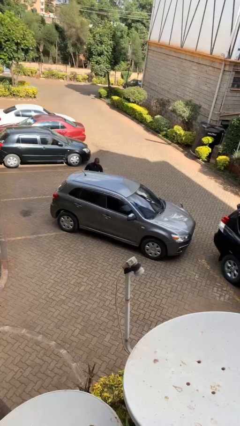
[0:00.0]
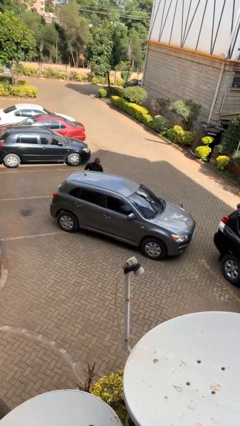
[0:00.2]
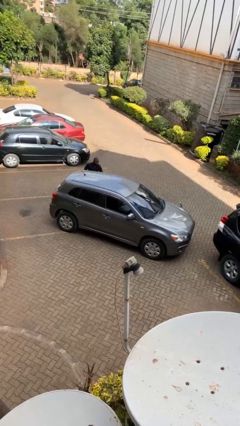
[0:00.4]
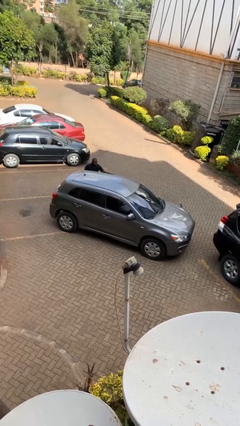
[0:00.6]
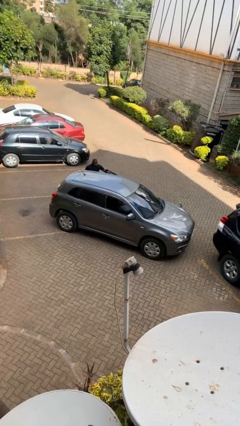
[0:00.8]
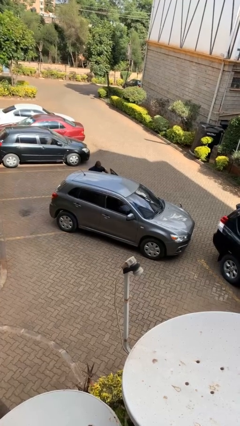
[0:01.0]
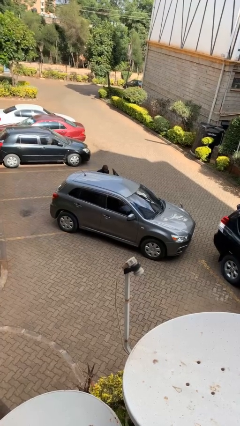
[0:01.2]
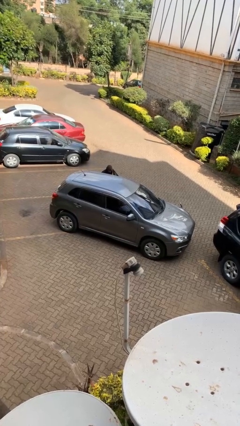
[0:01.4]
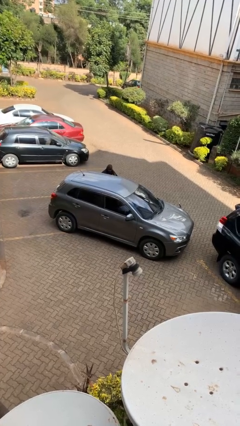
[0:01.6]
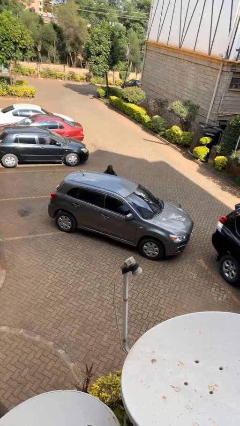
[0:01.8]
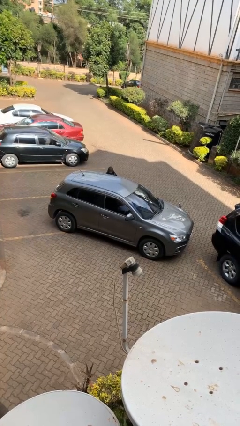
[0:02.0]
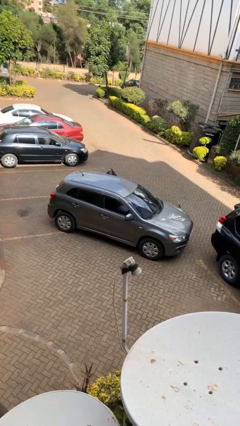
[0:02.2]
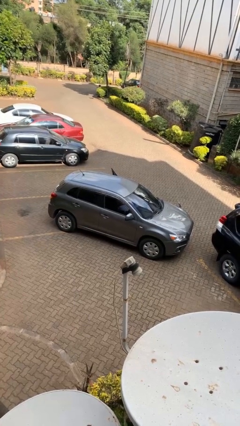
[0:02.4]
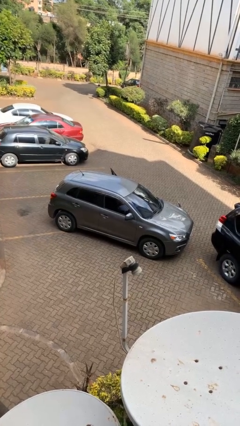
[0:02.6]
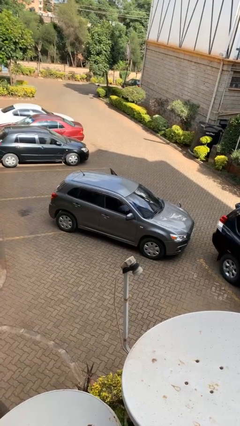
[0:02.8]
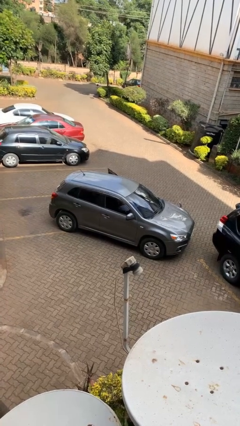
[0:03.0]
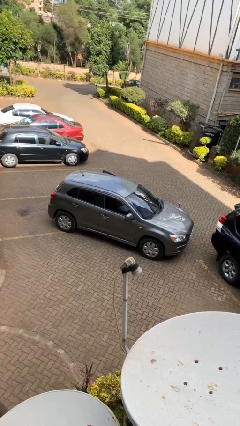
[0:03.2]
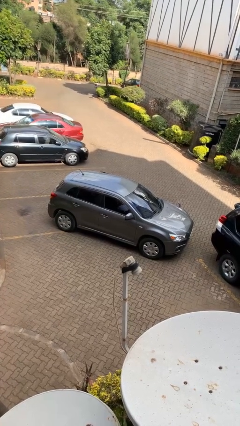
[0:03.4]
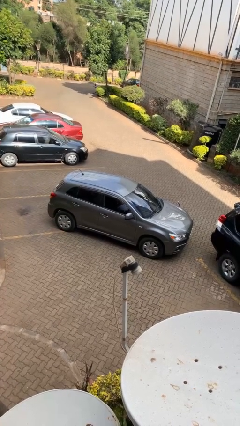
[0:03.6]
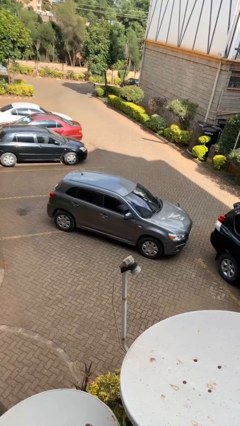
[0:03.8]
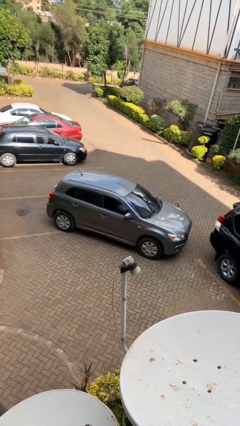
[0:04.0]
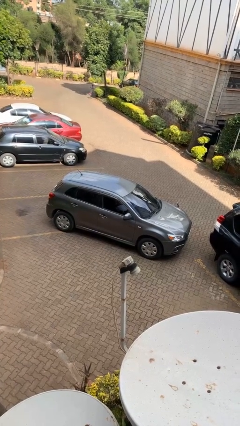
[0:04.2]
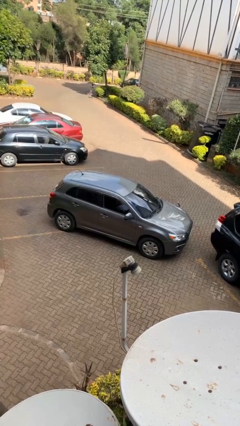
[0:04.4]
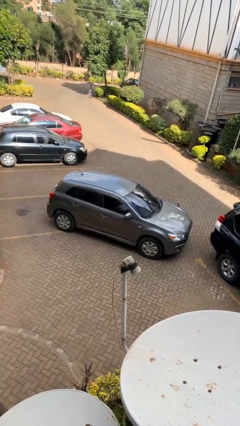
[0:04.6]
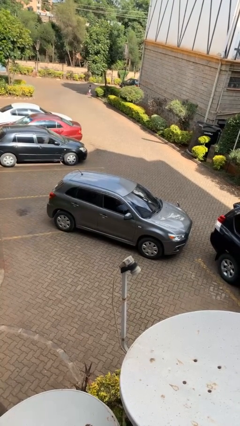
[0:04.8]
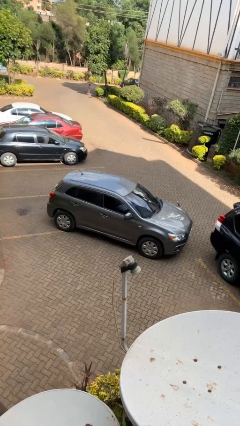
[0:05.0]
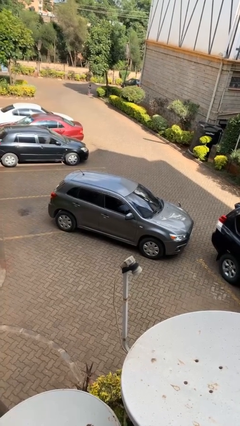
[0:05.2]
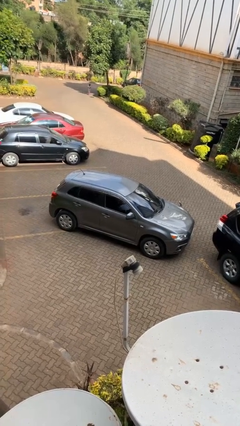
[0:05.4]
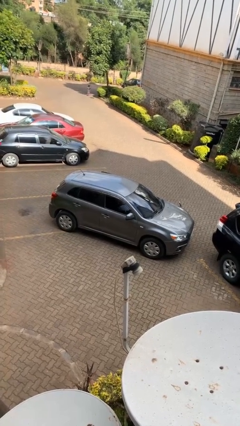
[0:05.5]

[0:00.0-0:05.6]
car picks up person

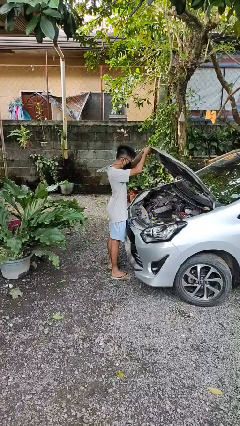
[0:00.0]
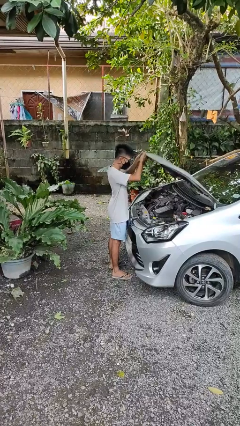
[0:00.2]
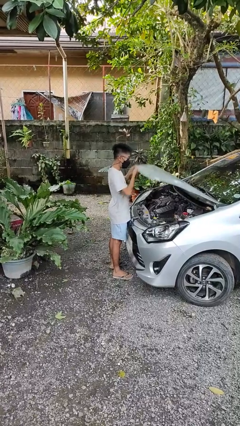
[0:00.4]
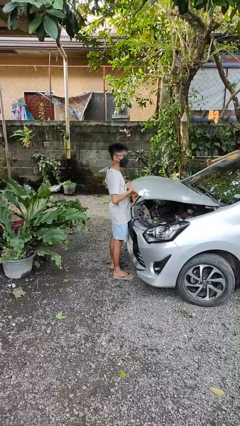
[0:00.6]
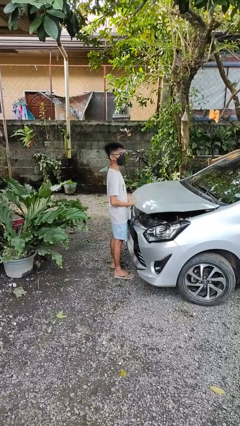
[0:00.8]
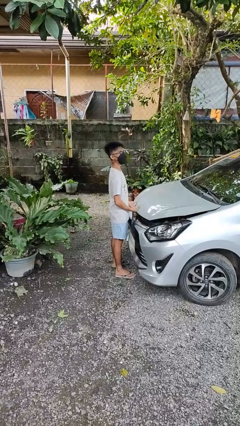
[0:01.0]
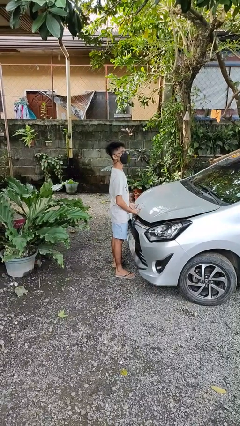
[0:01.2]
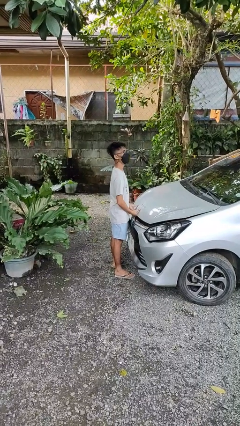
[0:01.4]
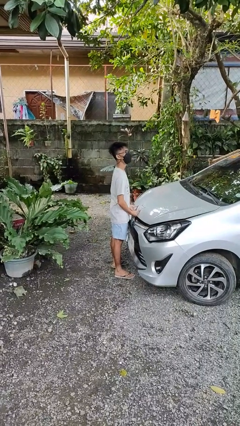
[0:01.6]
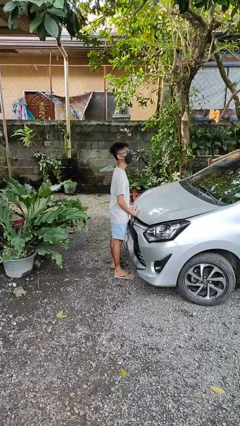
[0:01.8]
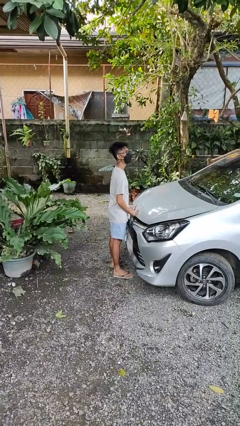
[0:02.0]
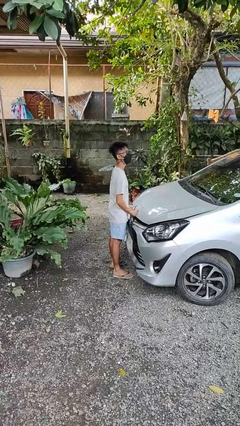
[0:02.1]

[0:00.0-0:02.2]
person closes car hood

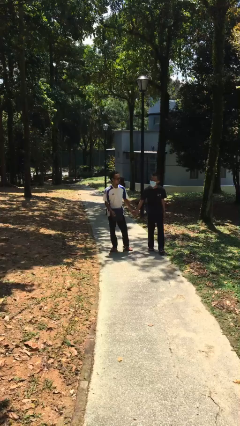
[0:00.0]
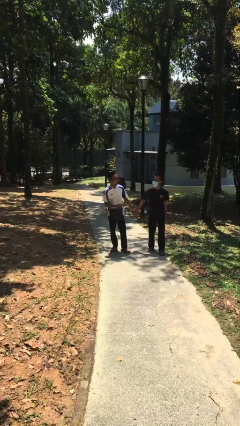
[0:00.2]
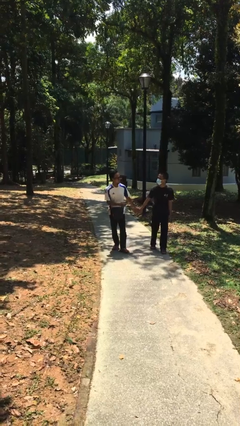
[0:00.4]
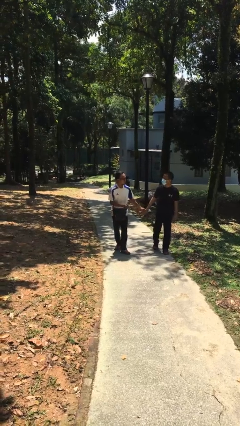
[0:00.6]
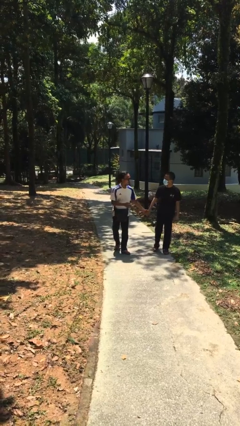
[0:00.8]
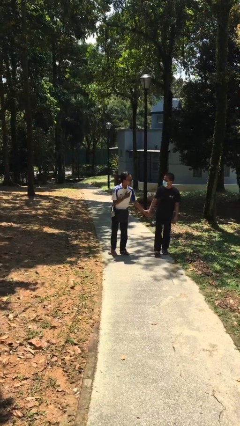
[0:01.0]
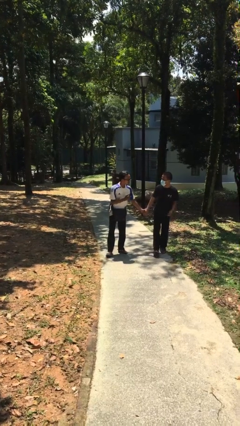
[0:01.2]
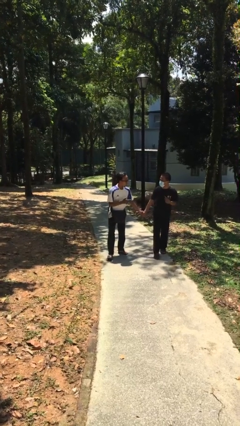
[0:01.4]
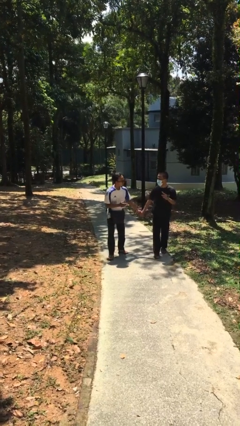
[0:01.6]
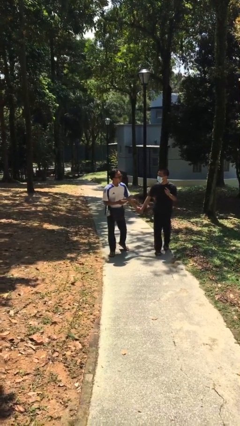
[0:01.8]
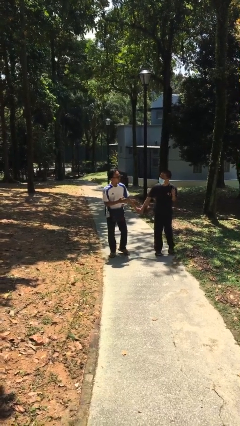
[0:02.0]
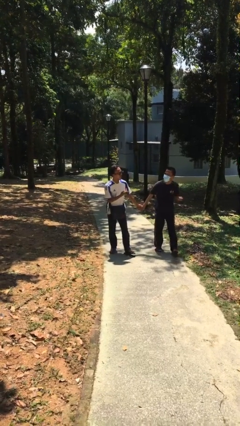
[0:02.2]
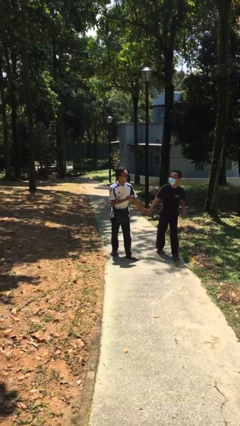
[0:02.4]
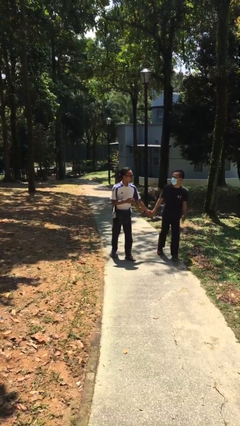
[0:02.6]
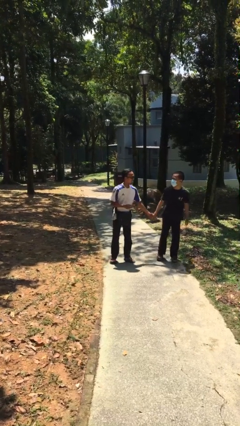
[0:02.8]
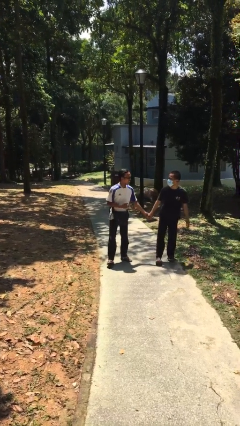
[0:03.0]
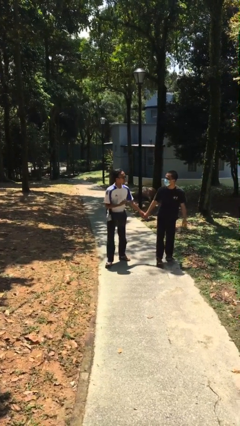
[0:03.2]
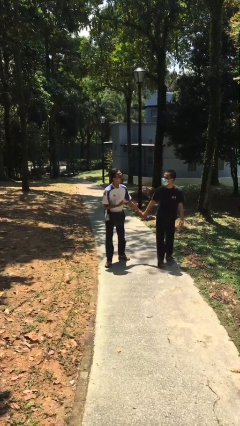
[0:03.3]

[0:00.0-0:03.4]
person holds hand

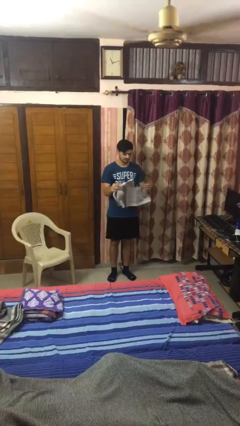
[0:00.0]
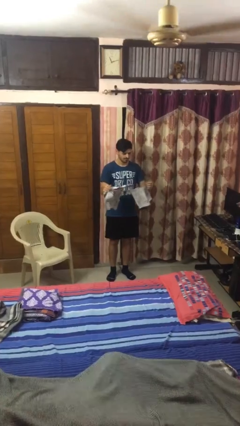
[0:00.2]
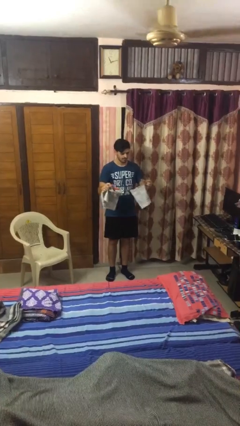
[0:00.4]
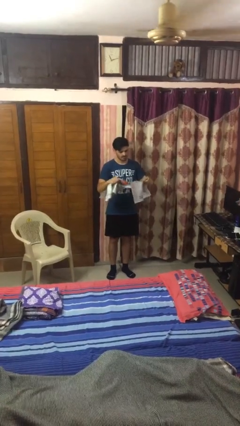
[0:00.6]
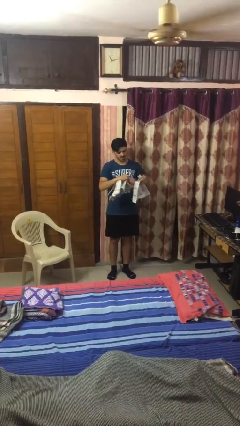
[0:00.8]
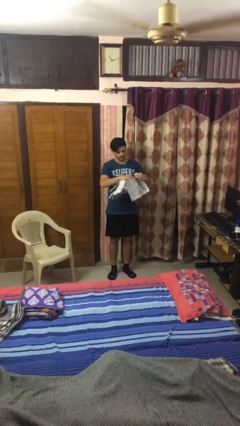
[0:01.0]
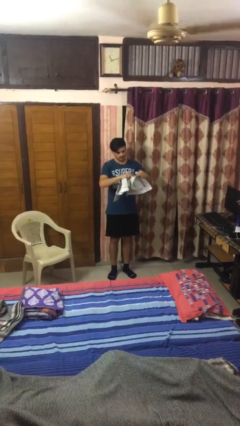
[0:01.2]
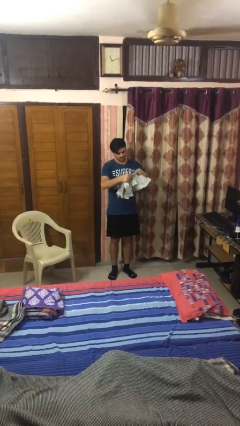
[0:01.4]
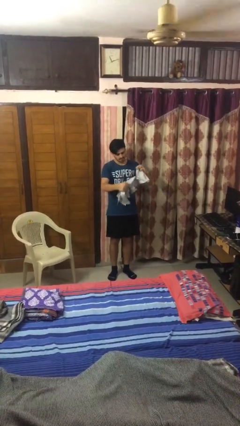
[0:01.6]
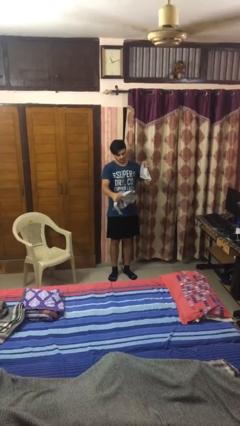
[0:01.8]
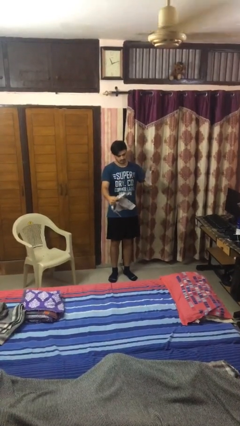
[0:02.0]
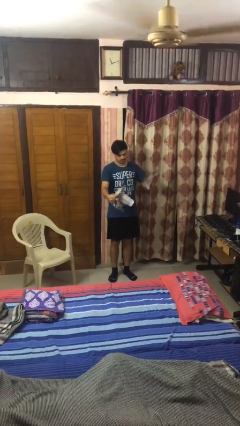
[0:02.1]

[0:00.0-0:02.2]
person tears paper

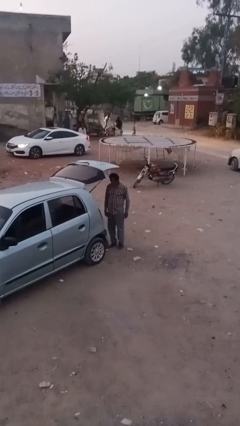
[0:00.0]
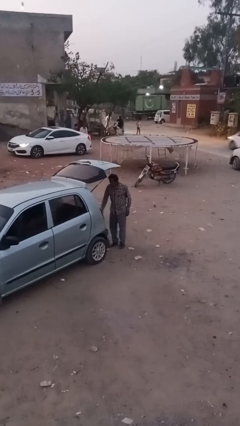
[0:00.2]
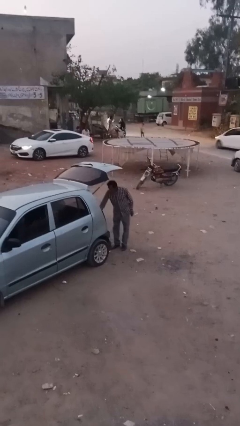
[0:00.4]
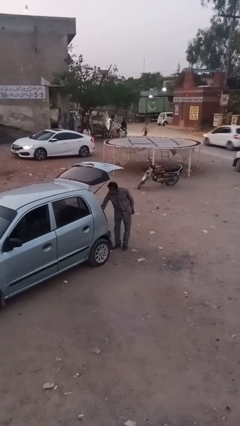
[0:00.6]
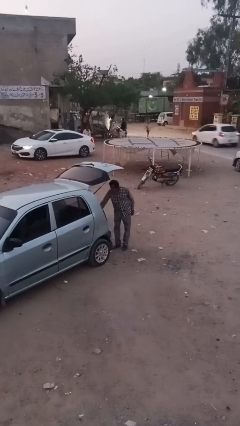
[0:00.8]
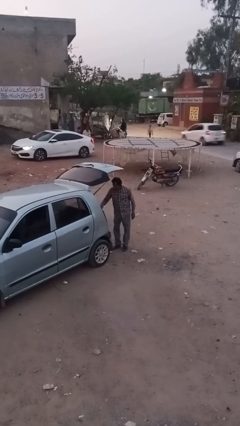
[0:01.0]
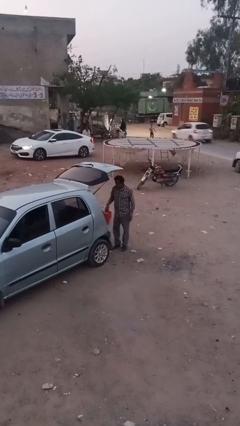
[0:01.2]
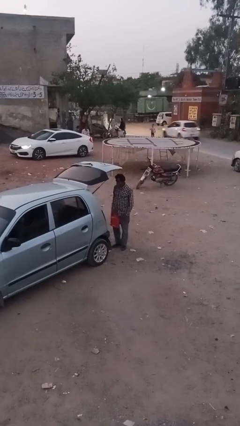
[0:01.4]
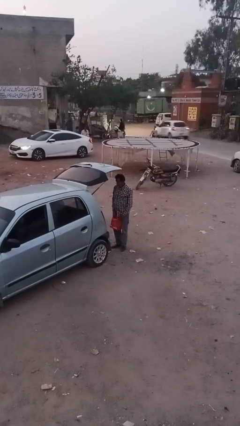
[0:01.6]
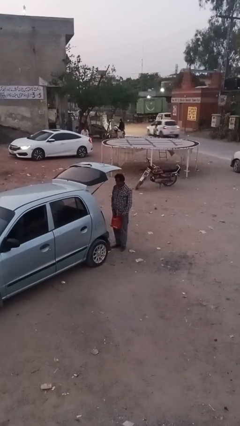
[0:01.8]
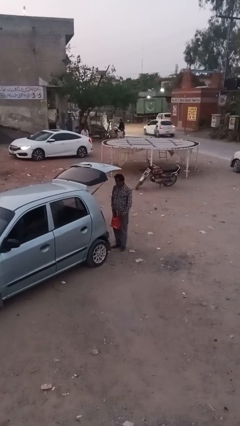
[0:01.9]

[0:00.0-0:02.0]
person unloads car

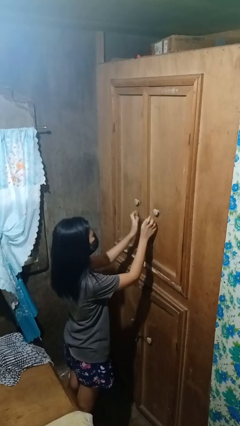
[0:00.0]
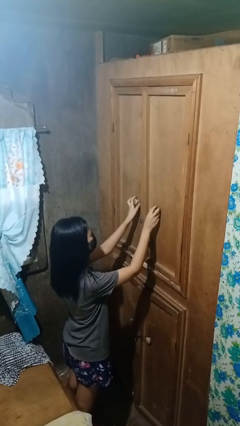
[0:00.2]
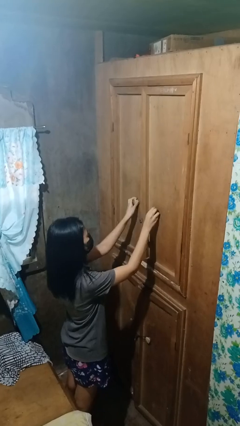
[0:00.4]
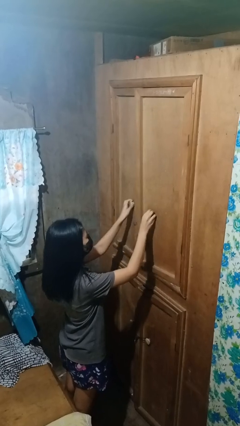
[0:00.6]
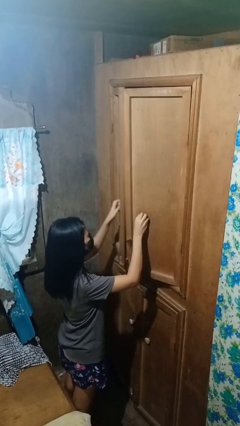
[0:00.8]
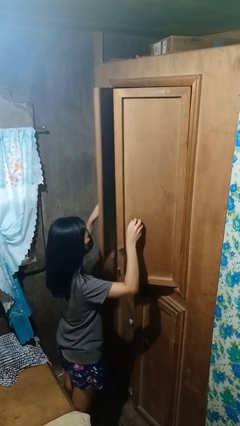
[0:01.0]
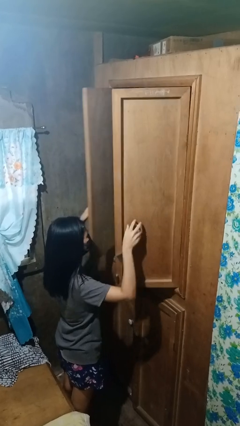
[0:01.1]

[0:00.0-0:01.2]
person opens closet door

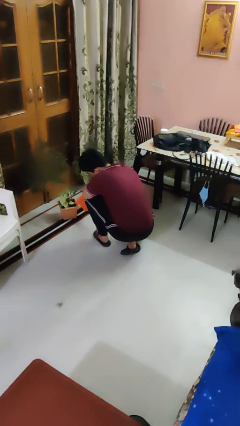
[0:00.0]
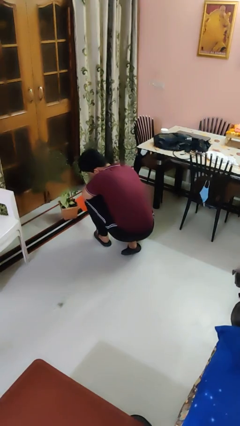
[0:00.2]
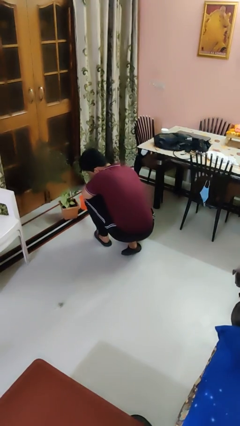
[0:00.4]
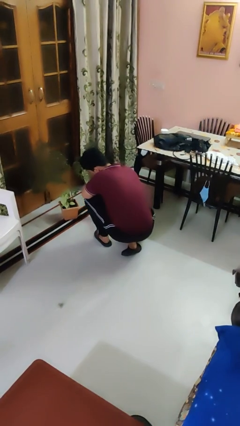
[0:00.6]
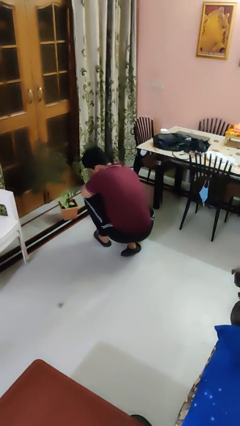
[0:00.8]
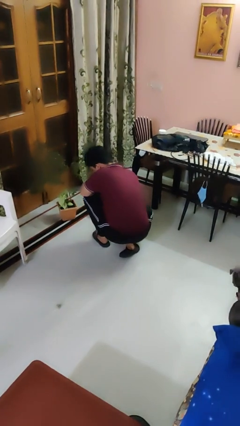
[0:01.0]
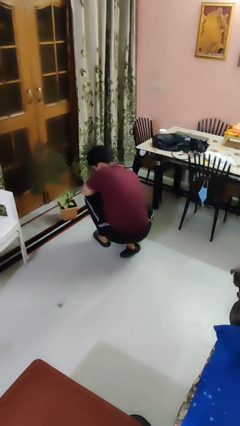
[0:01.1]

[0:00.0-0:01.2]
person waters houseplant
